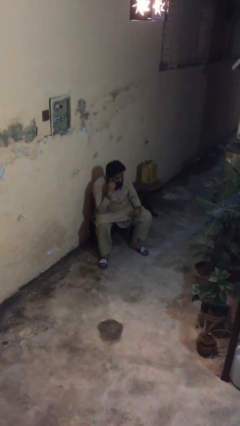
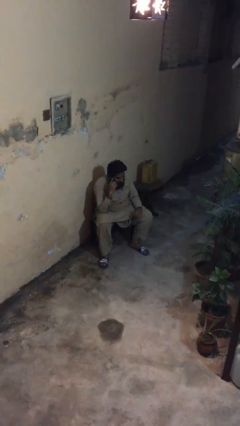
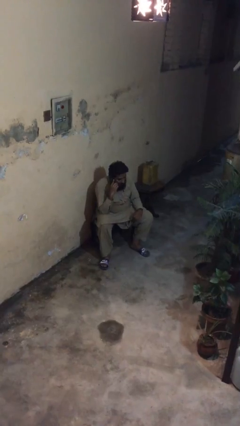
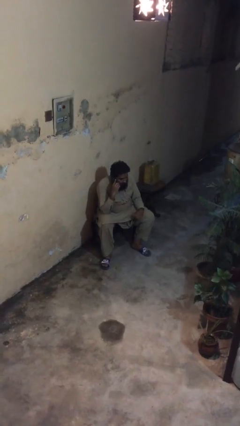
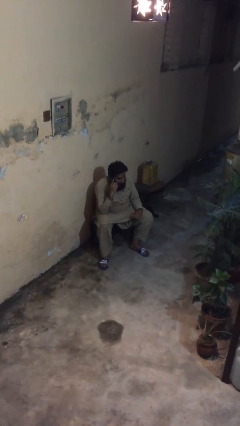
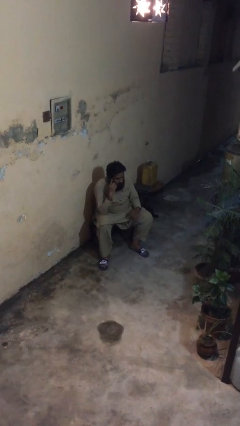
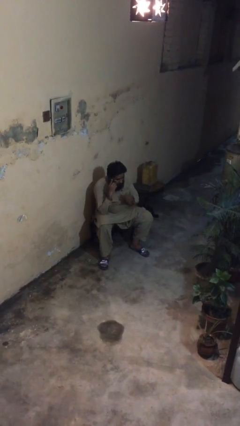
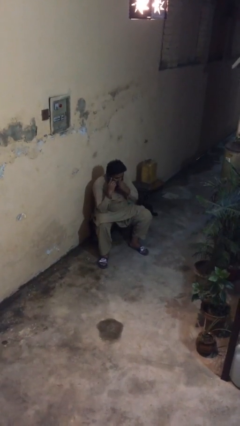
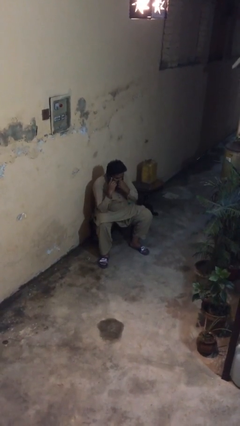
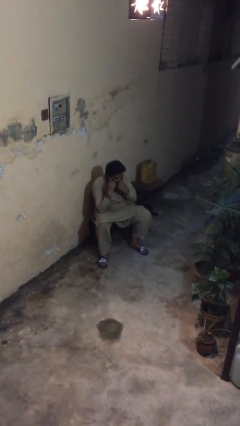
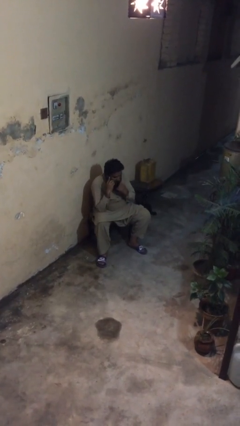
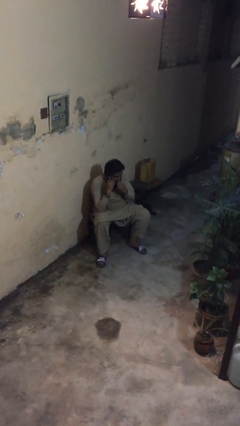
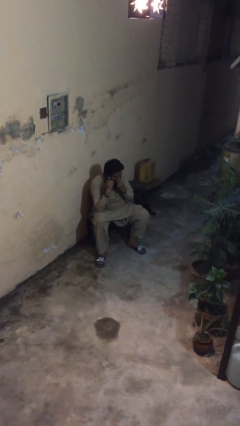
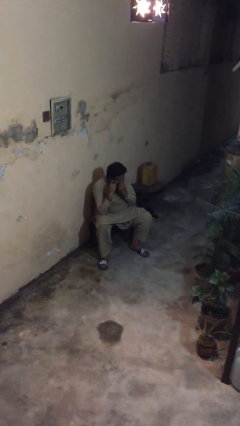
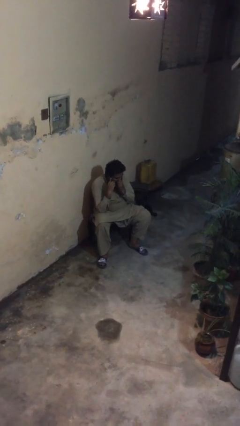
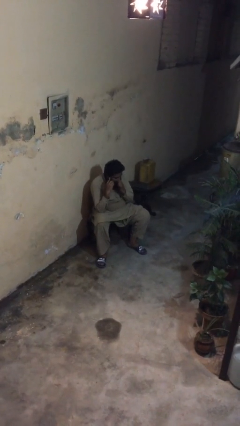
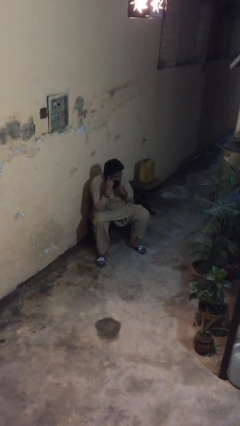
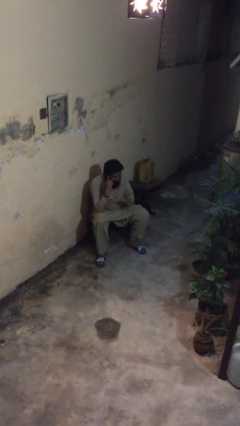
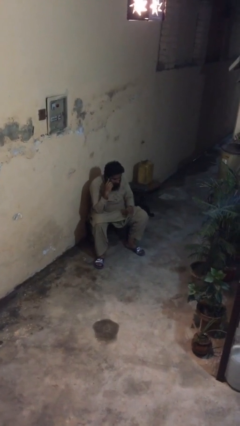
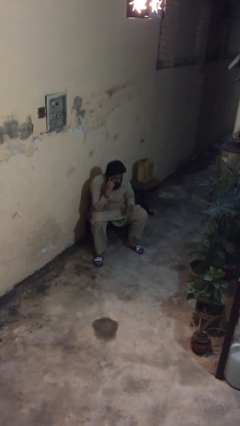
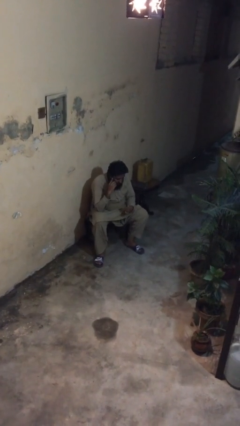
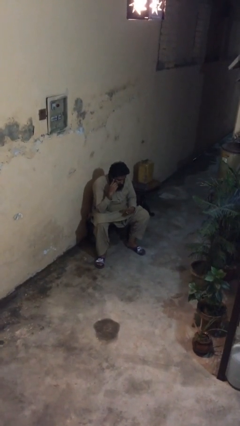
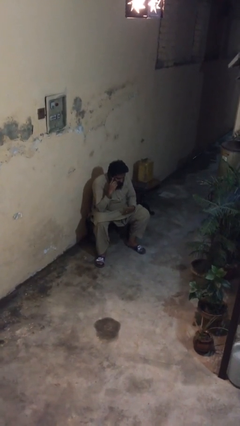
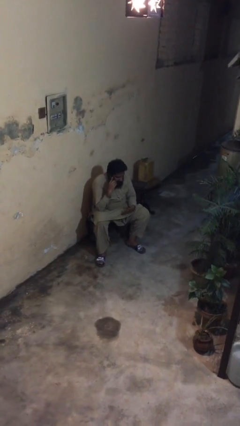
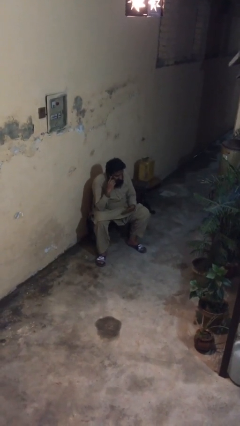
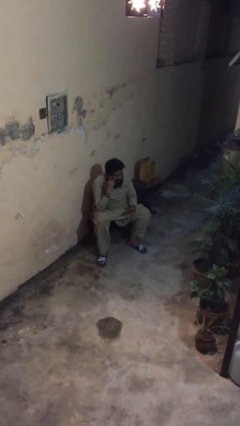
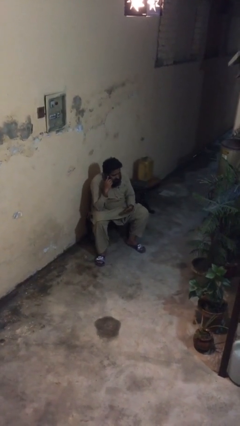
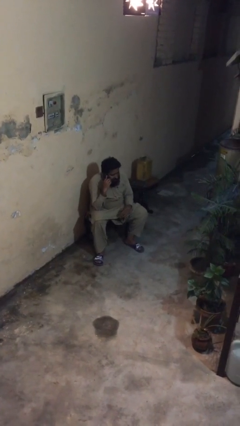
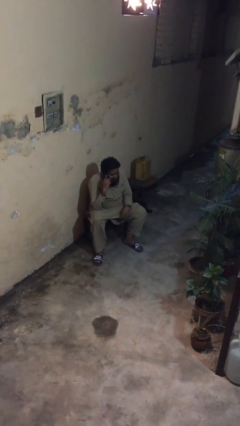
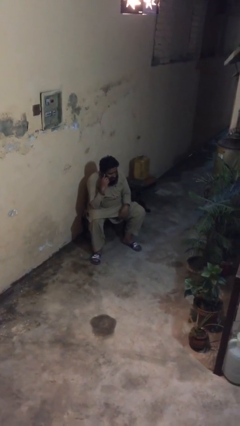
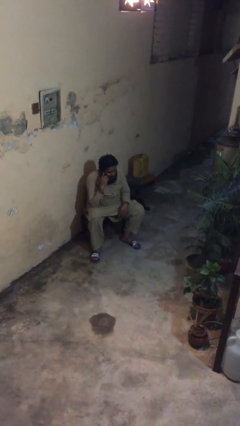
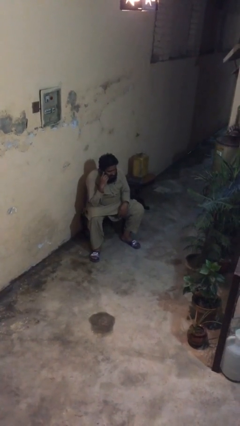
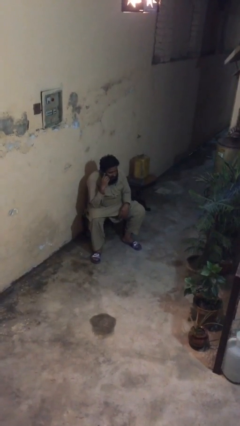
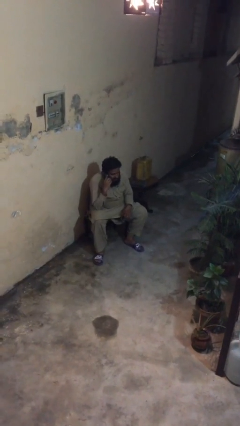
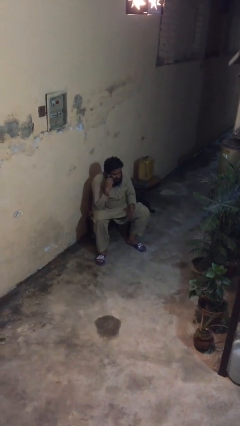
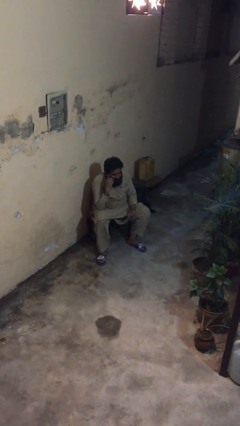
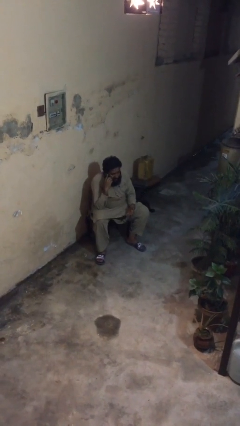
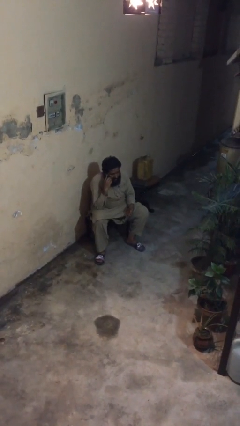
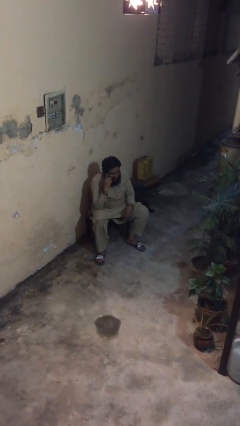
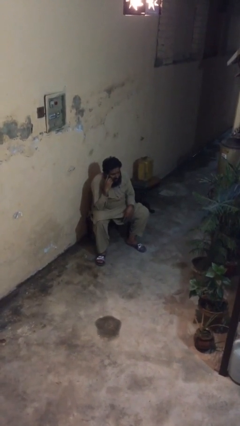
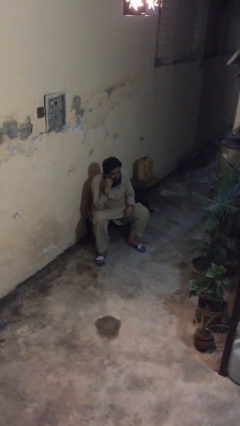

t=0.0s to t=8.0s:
person talks on phone

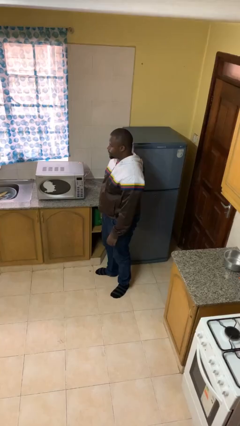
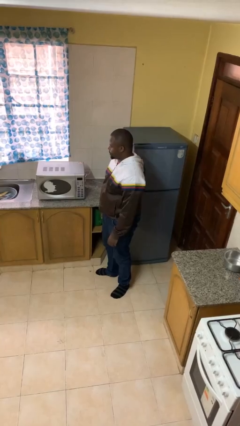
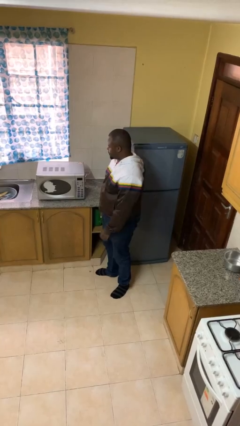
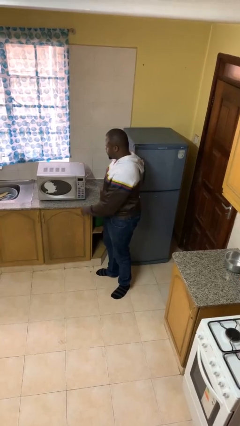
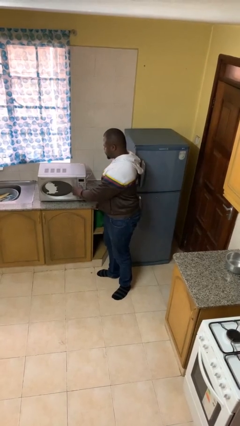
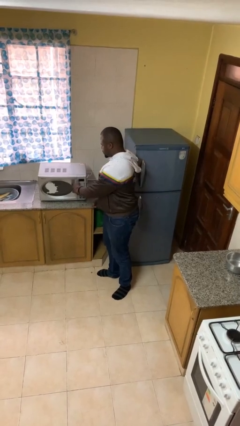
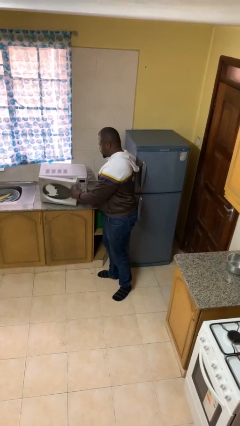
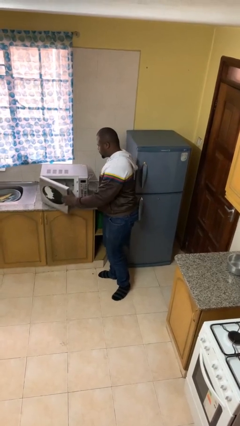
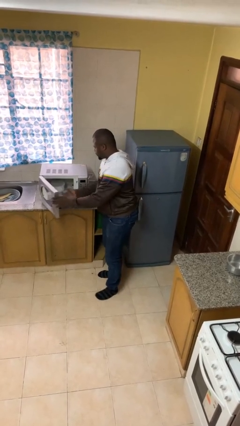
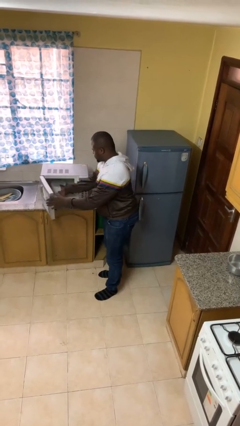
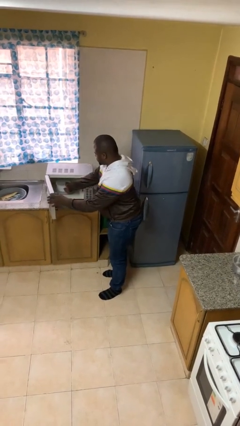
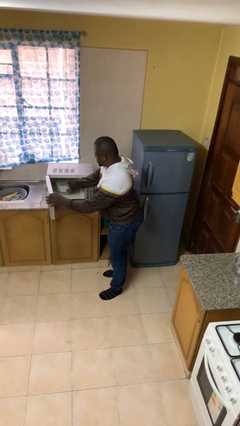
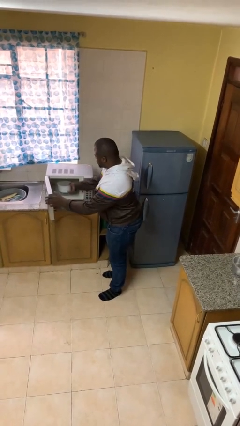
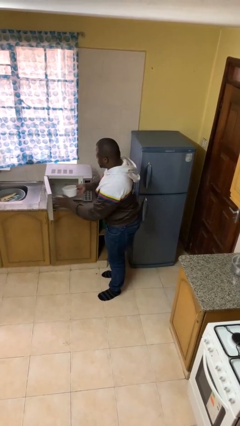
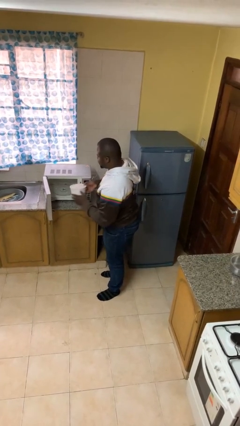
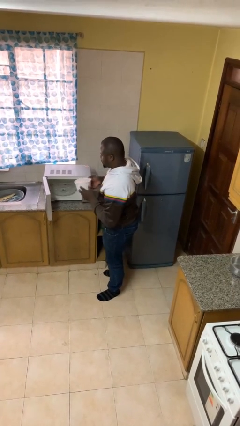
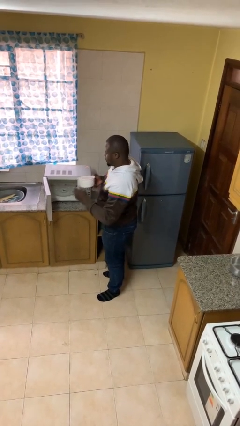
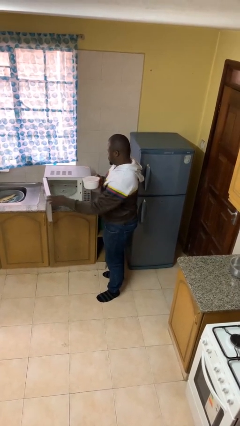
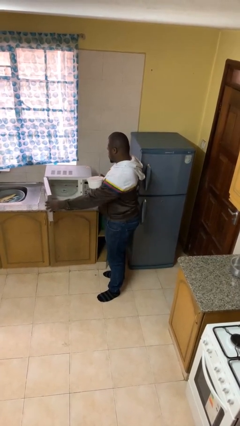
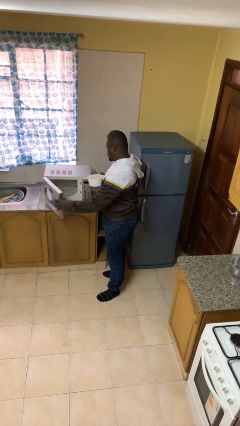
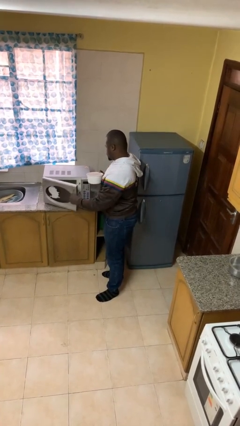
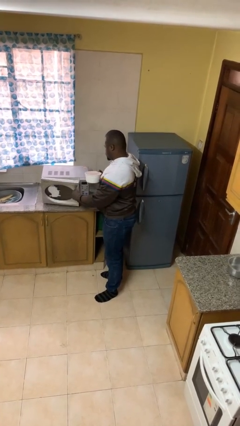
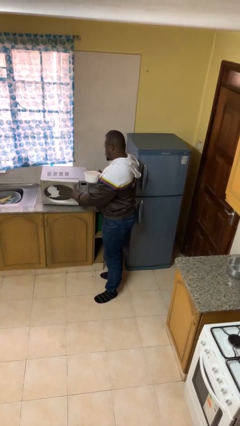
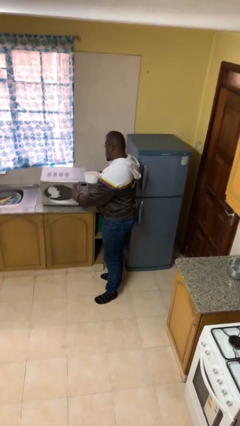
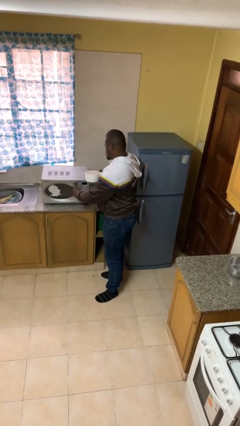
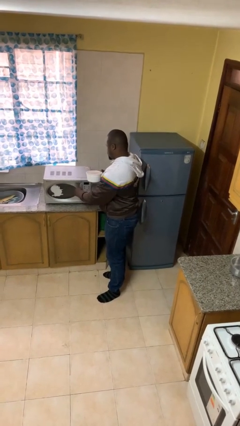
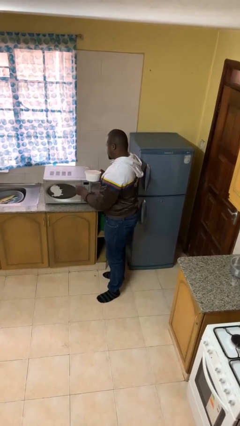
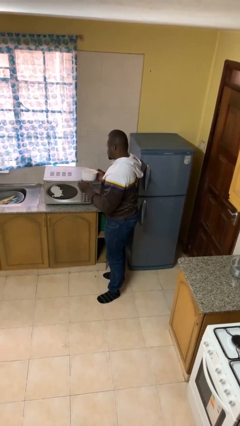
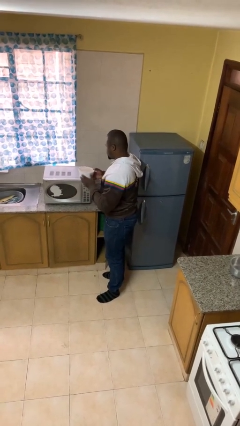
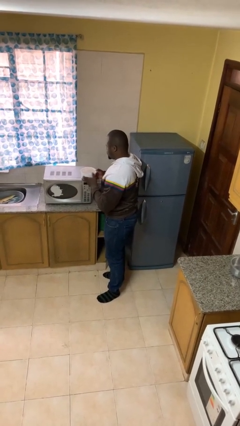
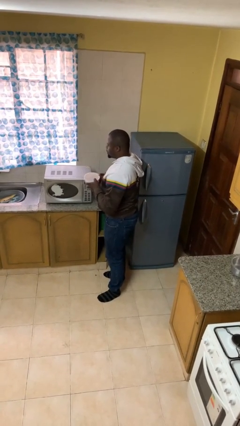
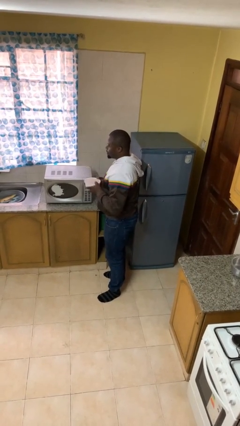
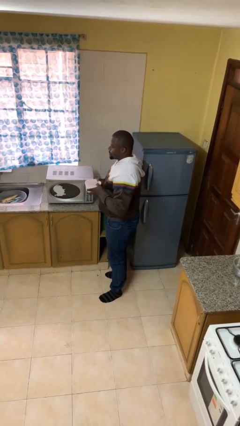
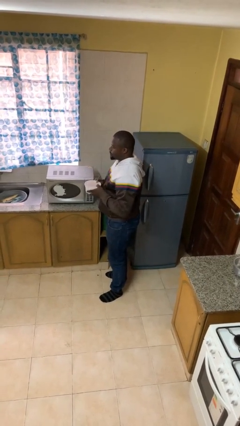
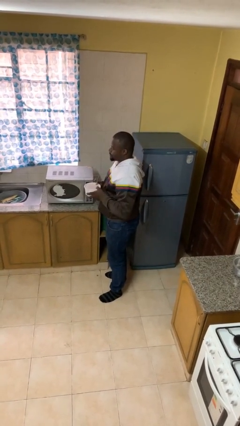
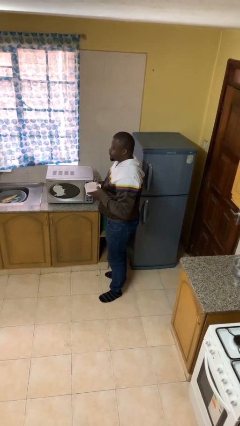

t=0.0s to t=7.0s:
person takes object from microwave

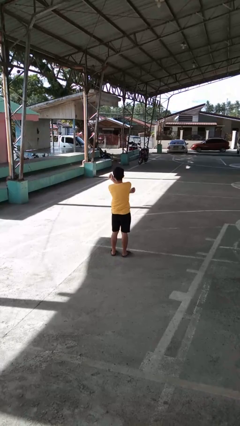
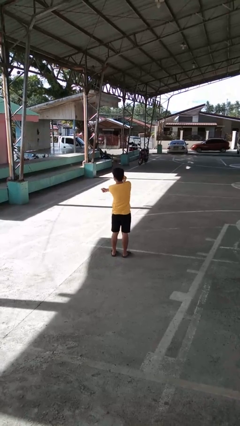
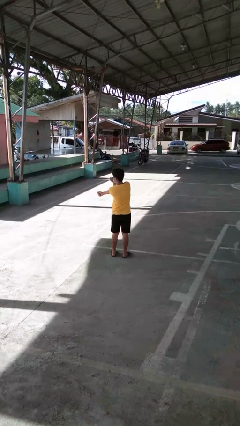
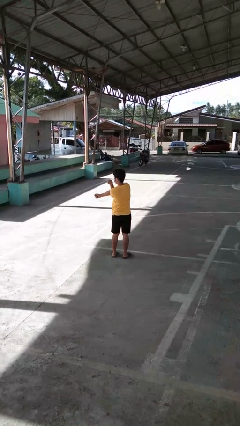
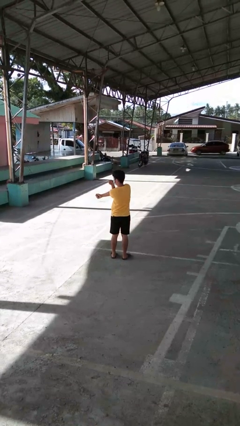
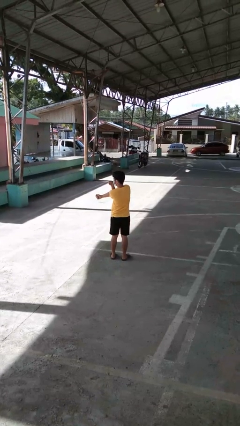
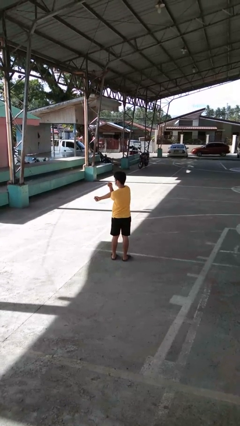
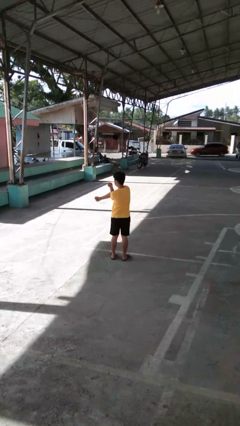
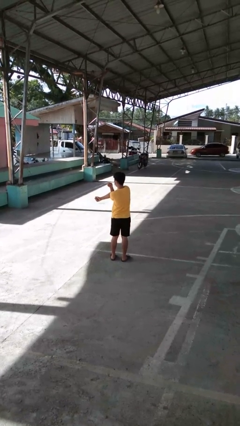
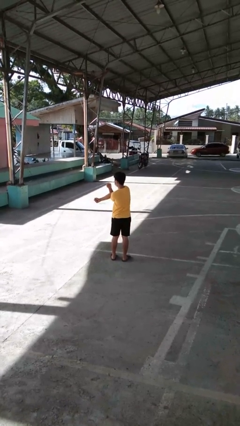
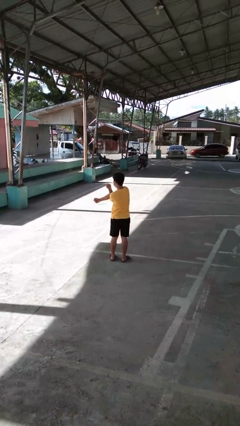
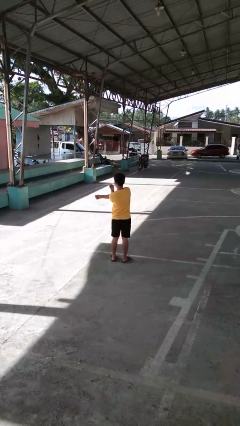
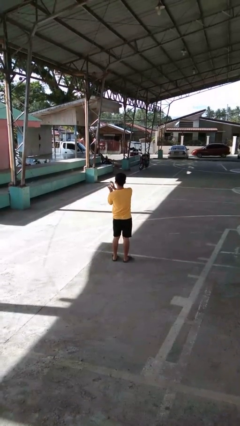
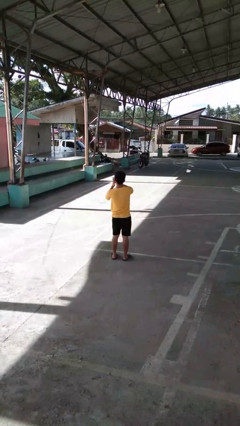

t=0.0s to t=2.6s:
person stretches arms to side

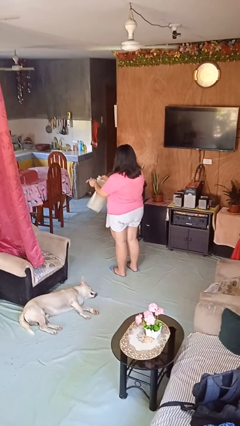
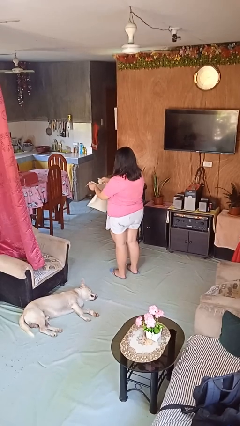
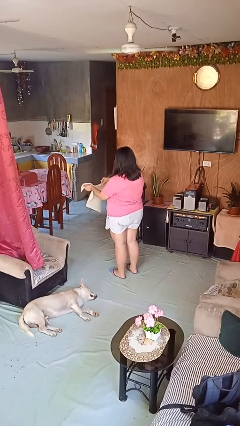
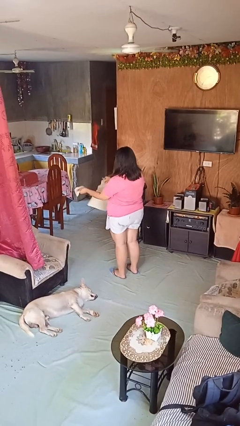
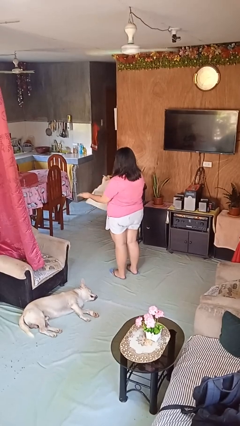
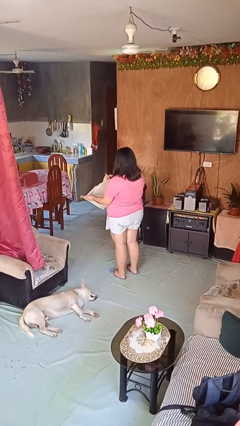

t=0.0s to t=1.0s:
person tears paper
